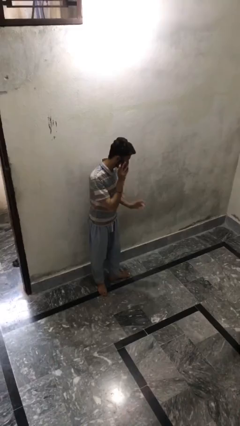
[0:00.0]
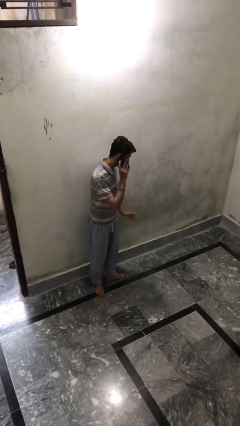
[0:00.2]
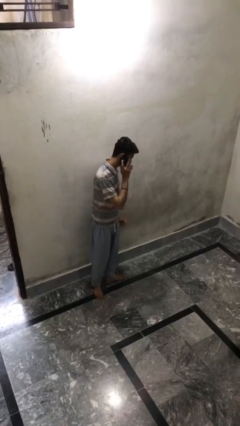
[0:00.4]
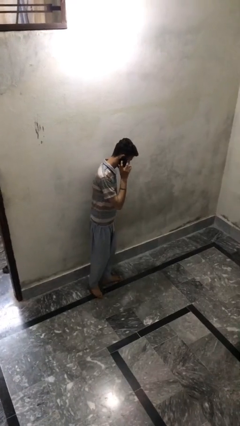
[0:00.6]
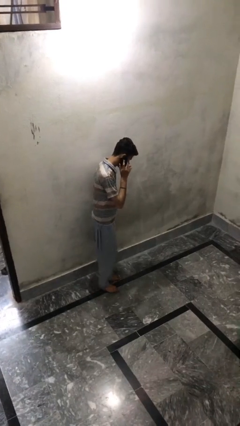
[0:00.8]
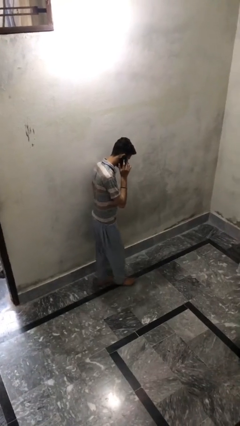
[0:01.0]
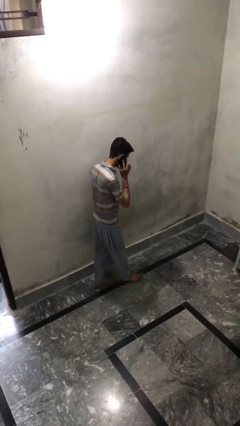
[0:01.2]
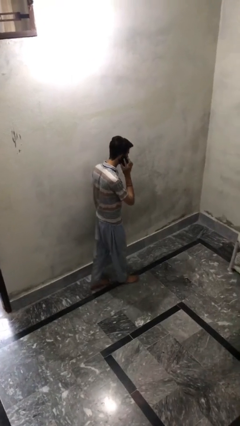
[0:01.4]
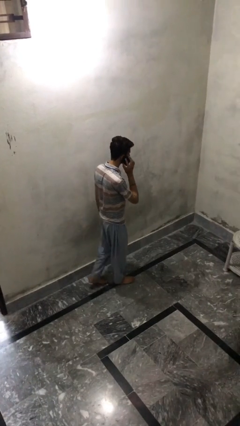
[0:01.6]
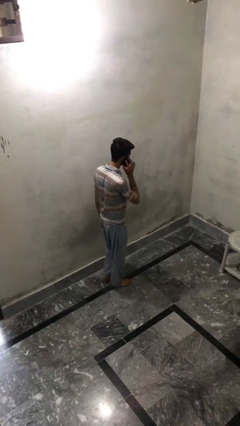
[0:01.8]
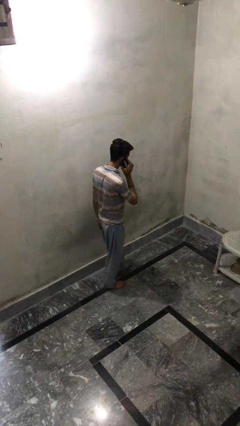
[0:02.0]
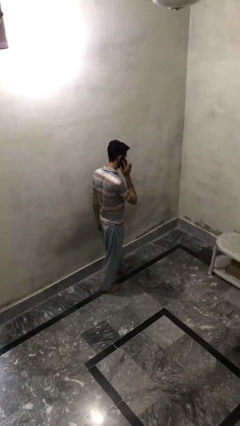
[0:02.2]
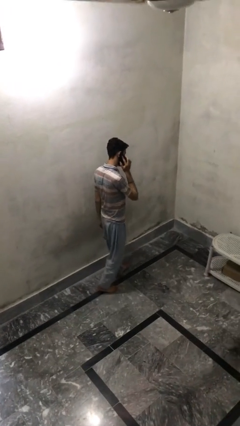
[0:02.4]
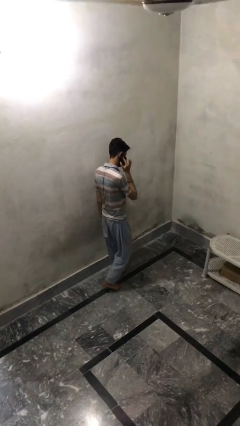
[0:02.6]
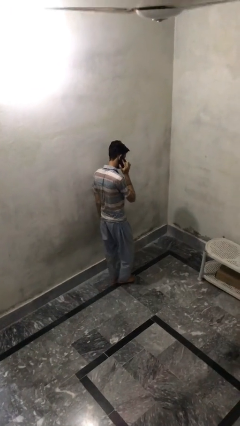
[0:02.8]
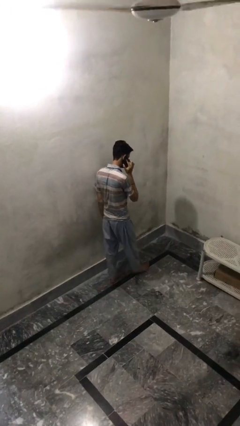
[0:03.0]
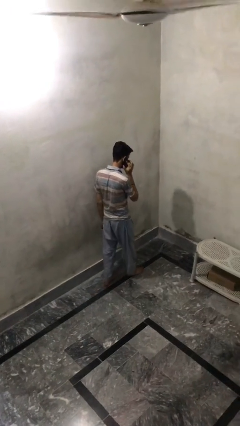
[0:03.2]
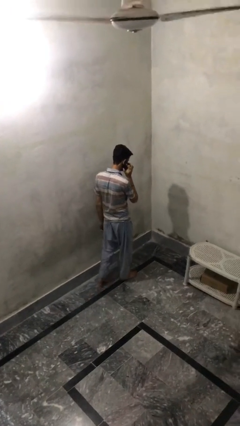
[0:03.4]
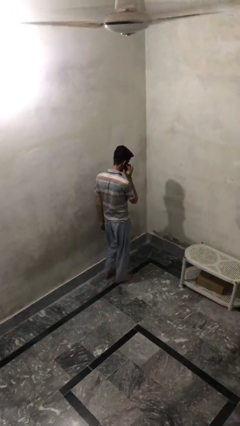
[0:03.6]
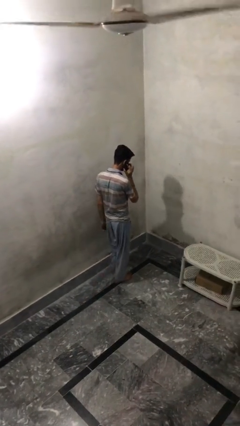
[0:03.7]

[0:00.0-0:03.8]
person talks on phone

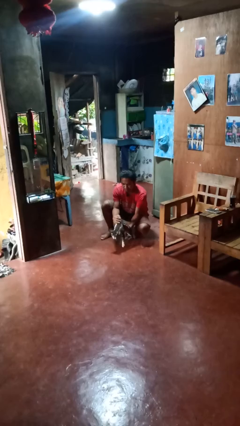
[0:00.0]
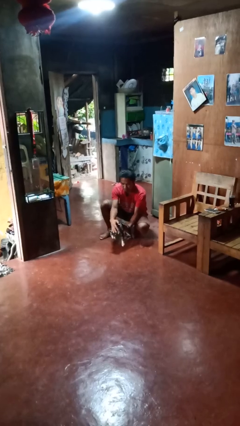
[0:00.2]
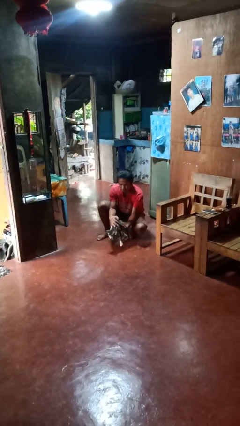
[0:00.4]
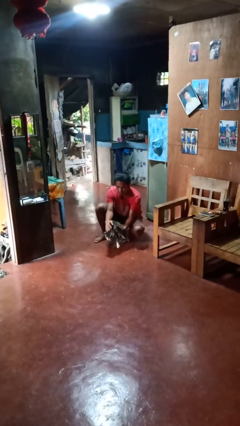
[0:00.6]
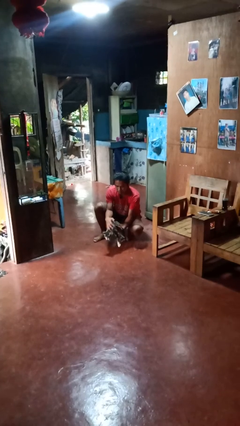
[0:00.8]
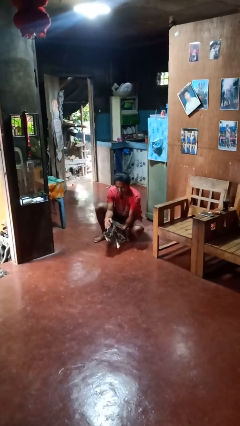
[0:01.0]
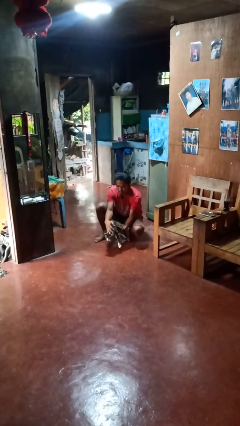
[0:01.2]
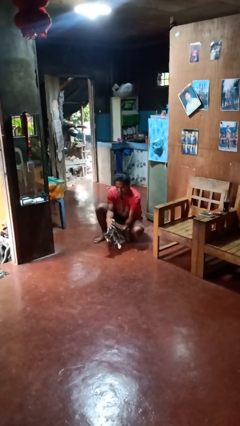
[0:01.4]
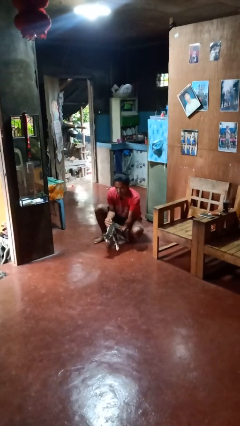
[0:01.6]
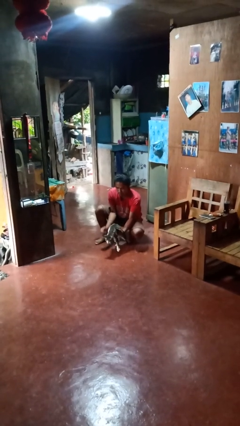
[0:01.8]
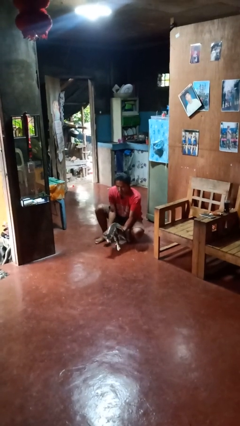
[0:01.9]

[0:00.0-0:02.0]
person pets cat

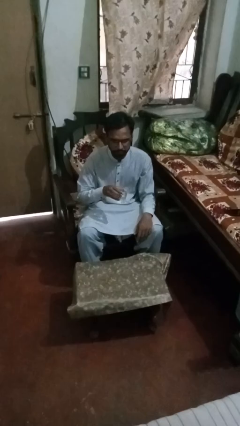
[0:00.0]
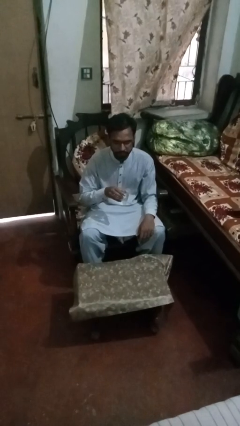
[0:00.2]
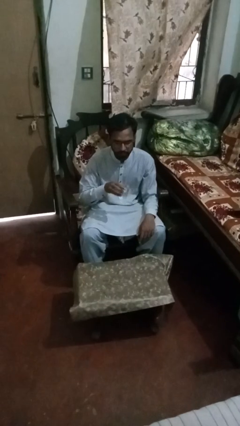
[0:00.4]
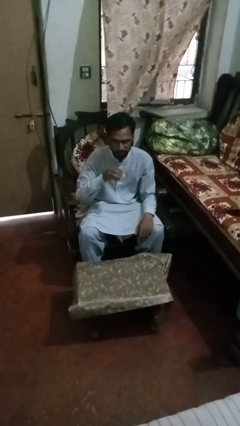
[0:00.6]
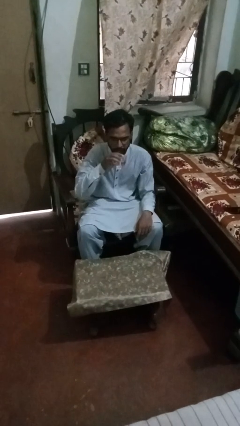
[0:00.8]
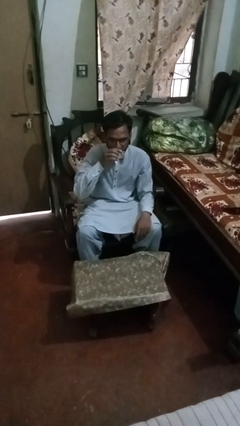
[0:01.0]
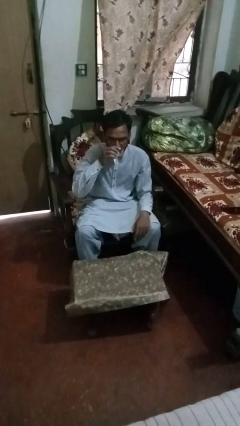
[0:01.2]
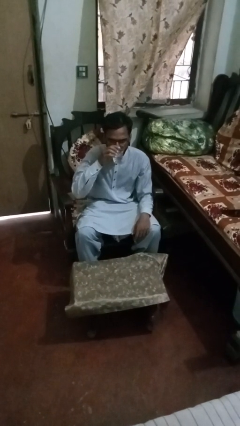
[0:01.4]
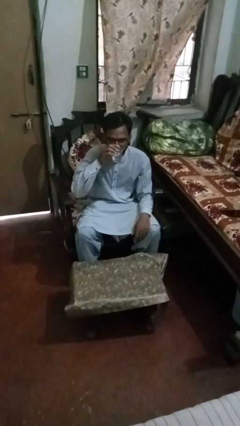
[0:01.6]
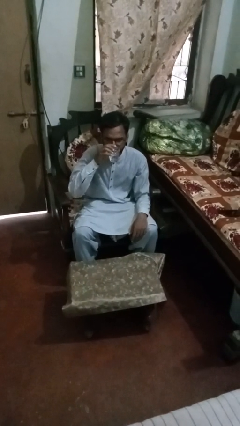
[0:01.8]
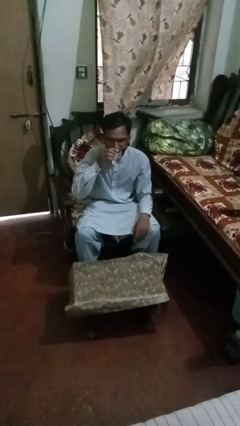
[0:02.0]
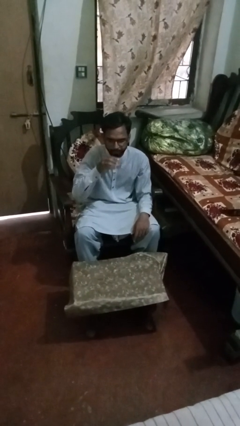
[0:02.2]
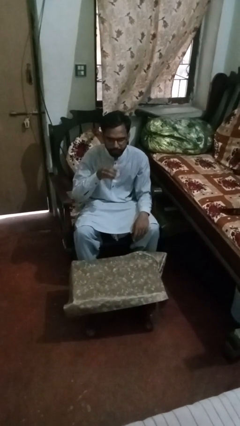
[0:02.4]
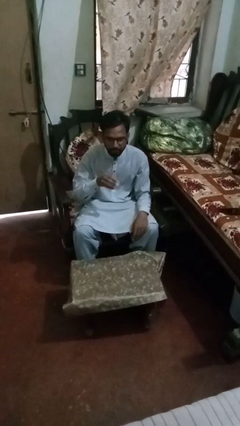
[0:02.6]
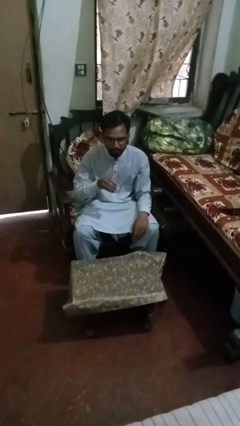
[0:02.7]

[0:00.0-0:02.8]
person drinks from shotglass

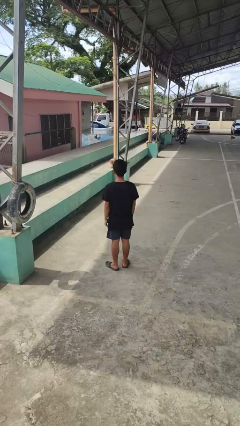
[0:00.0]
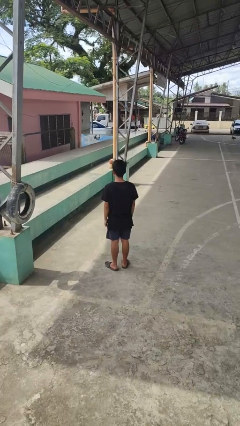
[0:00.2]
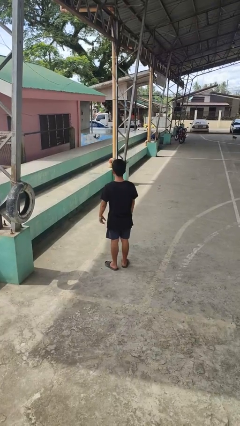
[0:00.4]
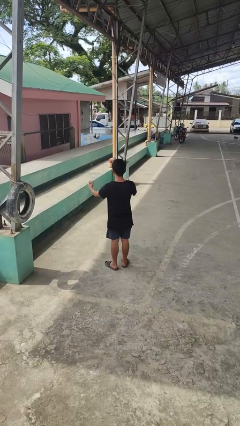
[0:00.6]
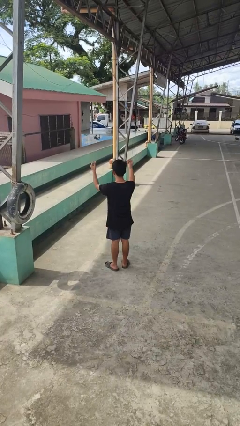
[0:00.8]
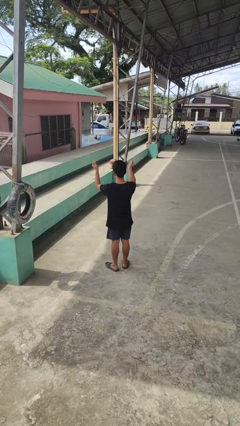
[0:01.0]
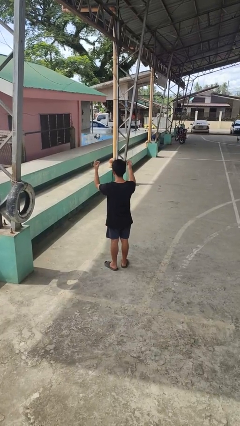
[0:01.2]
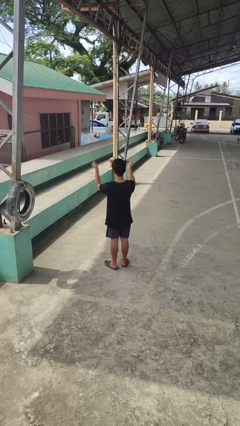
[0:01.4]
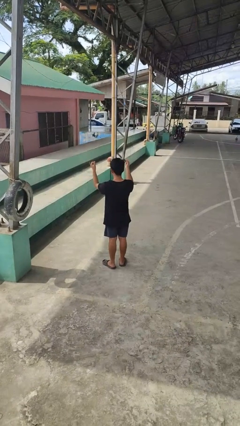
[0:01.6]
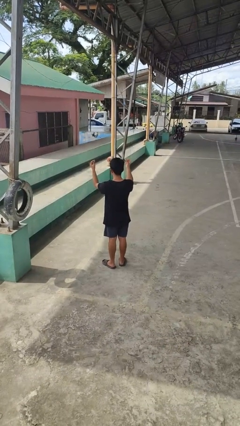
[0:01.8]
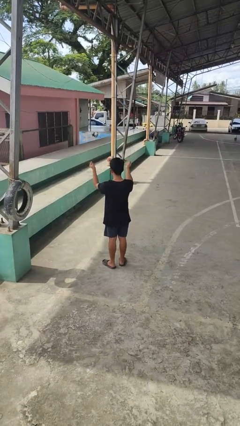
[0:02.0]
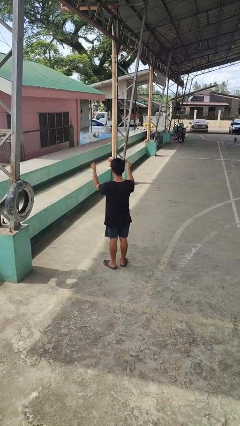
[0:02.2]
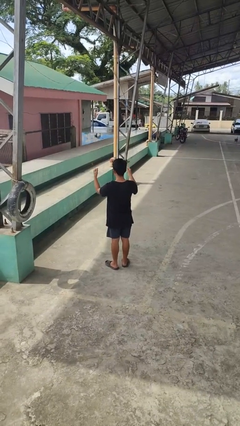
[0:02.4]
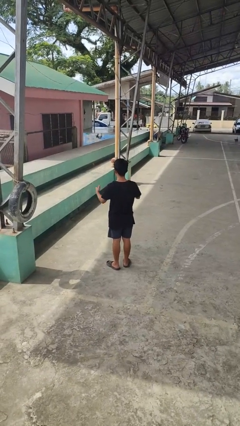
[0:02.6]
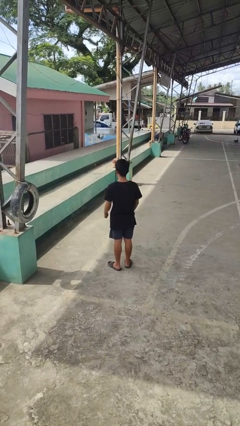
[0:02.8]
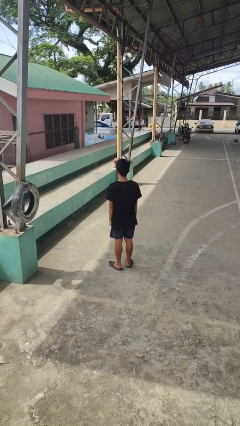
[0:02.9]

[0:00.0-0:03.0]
person snaps fingers

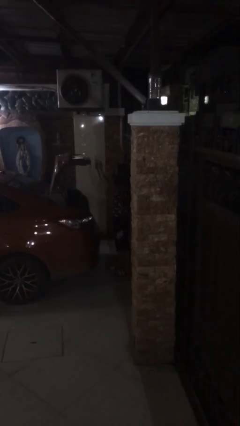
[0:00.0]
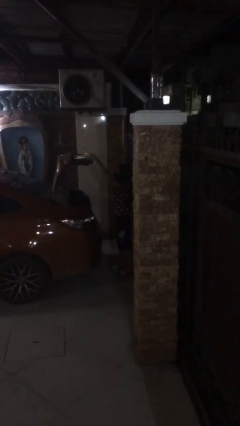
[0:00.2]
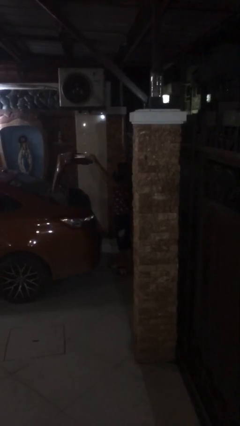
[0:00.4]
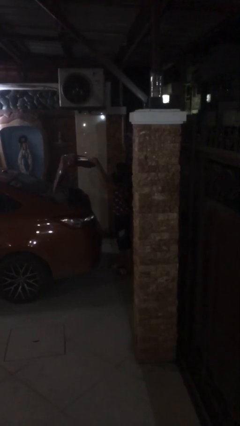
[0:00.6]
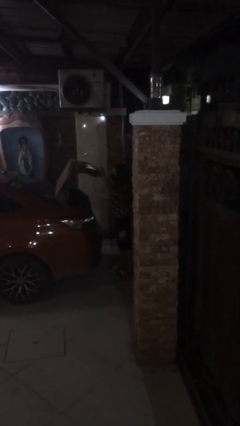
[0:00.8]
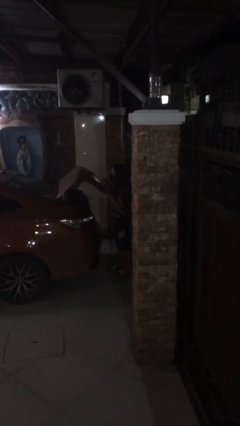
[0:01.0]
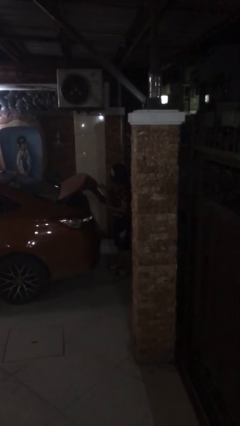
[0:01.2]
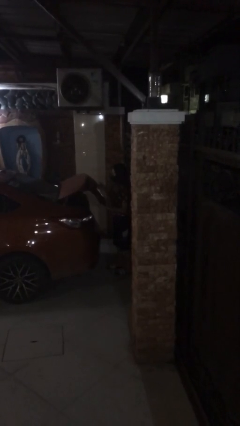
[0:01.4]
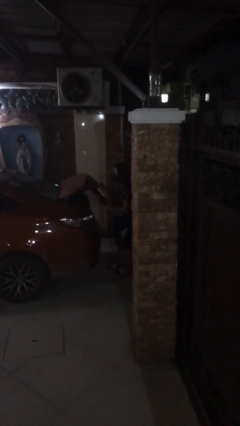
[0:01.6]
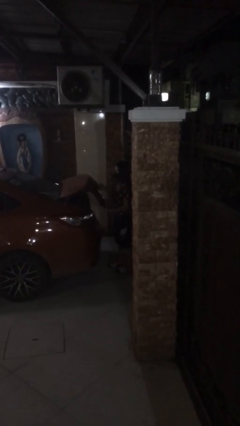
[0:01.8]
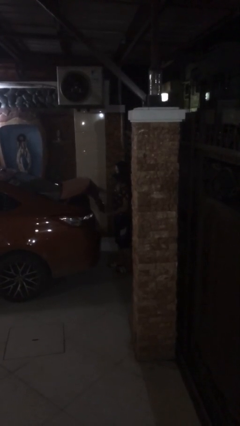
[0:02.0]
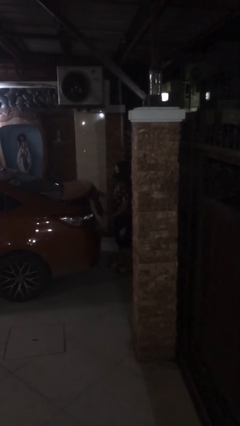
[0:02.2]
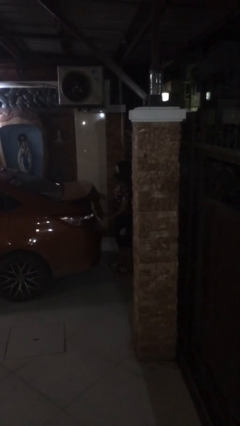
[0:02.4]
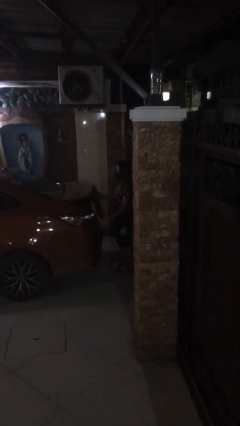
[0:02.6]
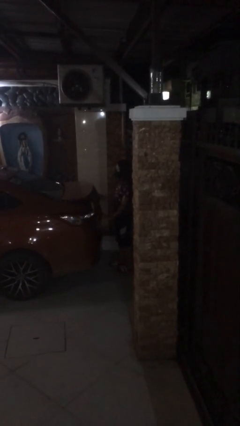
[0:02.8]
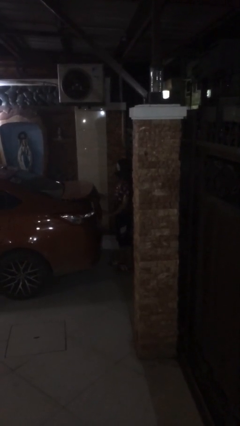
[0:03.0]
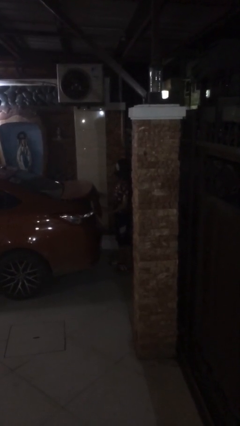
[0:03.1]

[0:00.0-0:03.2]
person closes car trunk

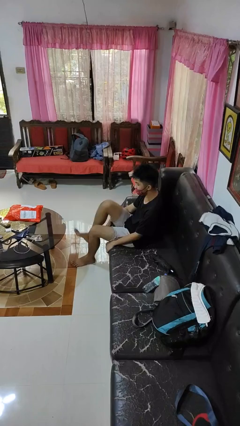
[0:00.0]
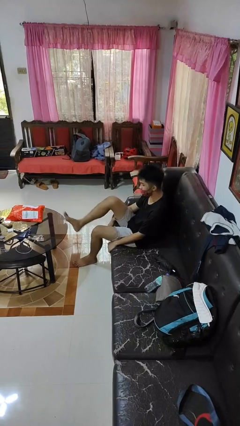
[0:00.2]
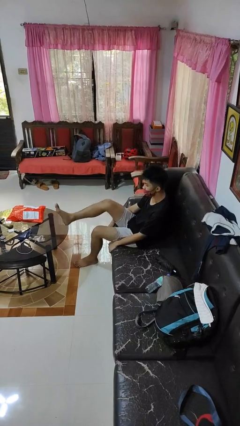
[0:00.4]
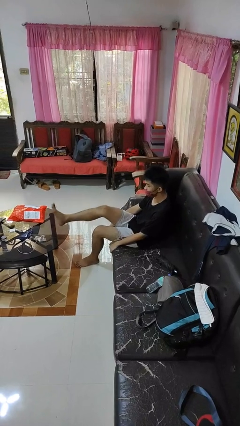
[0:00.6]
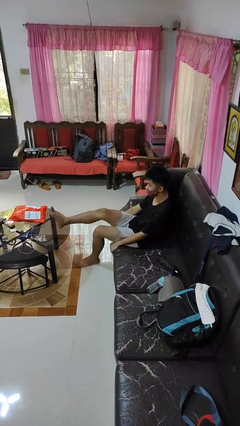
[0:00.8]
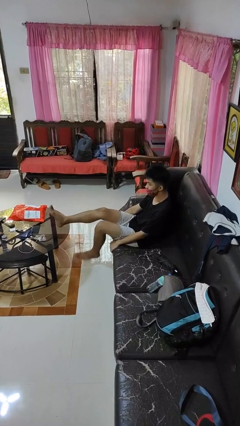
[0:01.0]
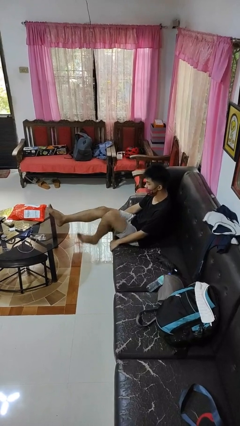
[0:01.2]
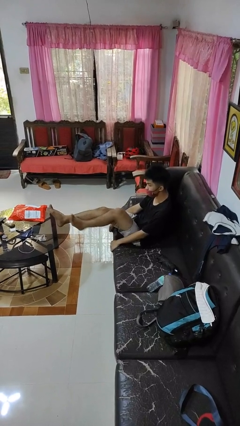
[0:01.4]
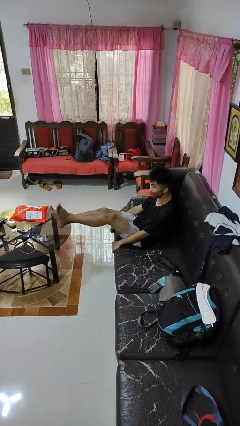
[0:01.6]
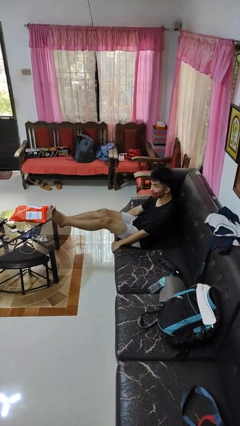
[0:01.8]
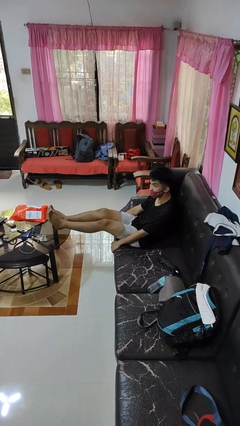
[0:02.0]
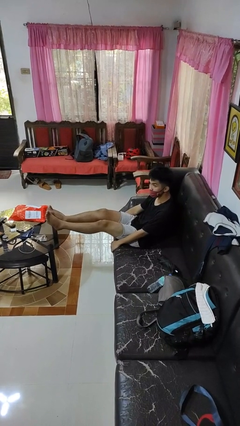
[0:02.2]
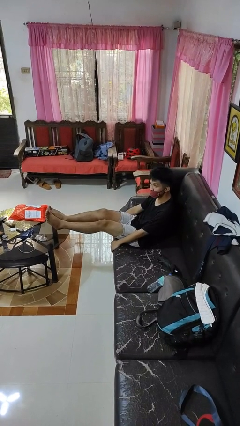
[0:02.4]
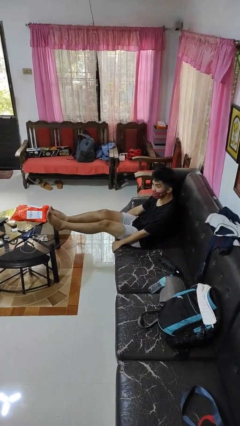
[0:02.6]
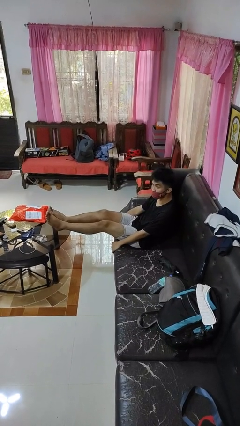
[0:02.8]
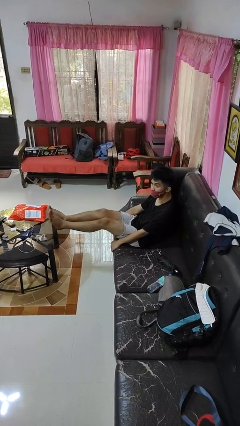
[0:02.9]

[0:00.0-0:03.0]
person puts feet up
